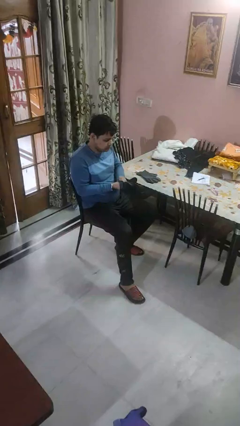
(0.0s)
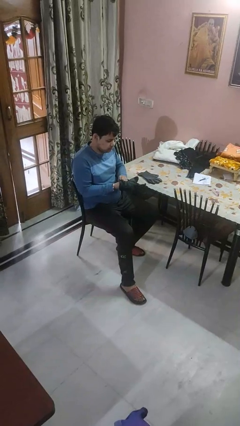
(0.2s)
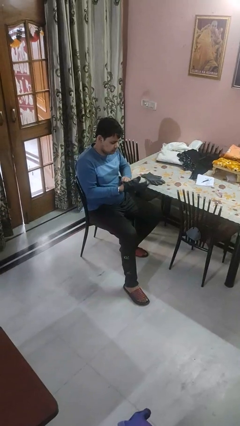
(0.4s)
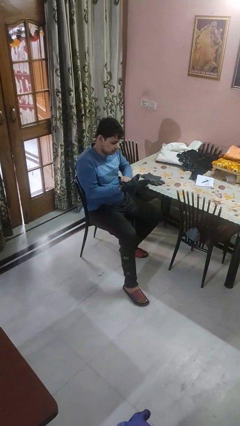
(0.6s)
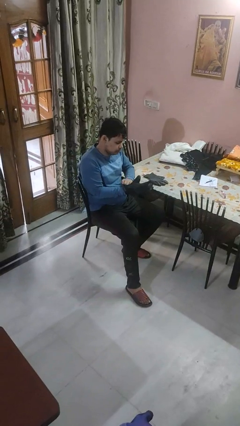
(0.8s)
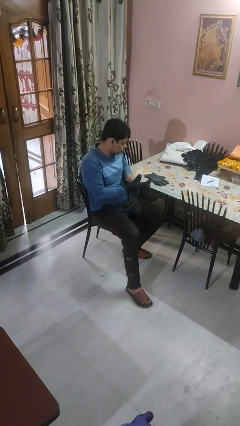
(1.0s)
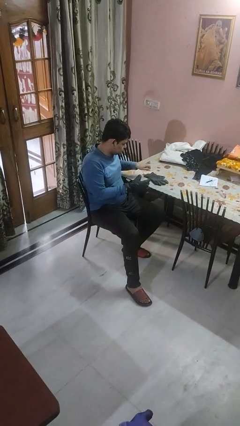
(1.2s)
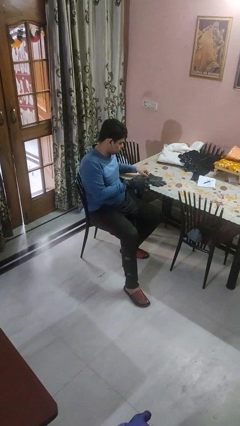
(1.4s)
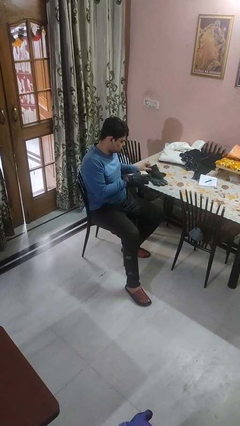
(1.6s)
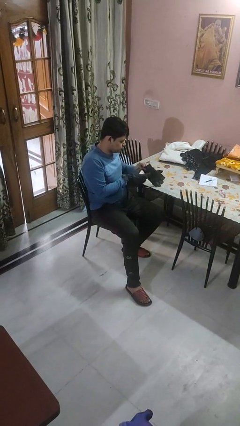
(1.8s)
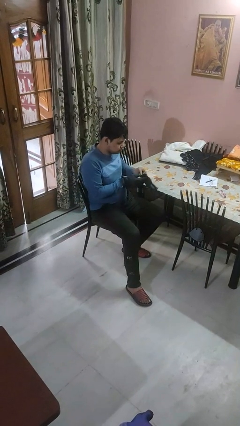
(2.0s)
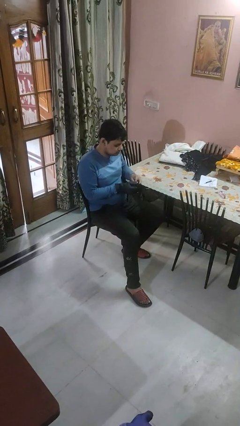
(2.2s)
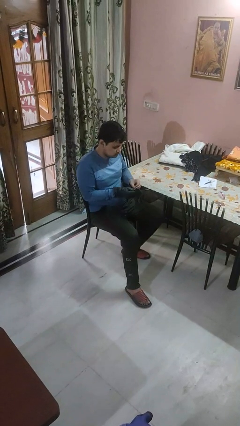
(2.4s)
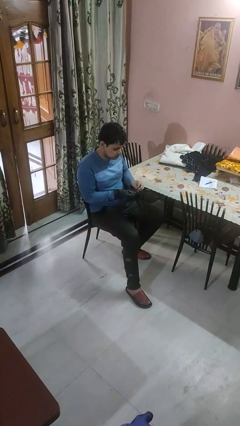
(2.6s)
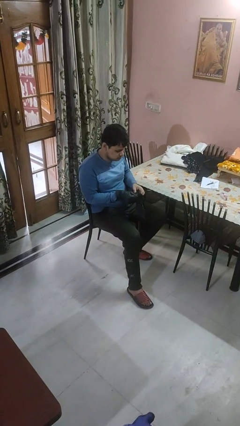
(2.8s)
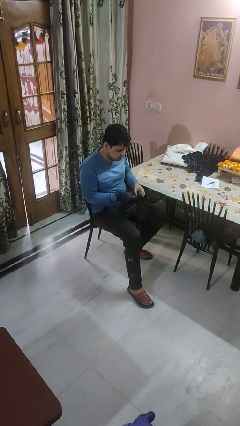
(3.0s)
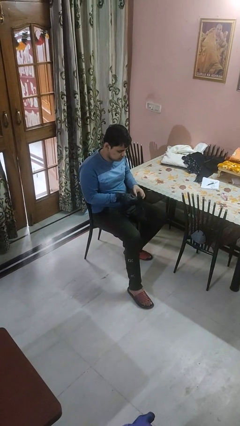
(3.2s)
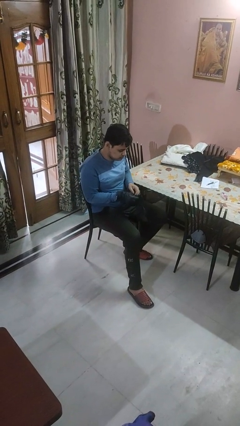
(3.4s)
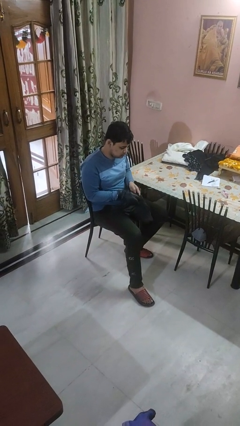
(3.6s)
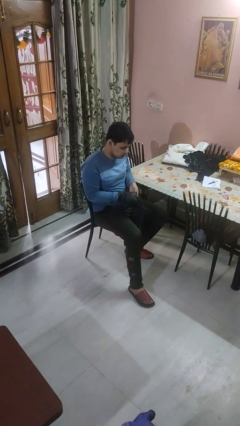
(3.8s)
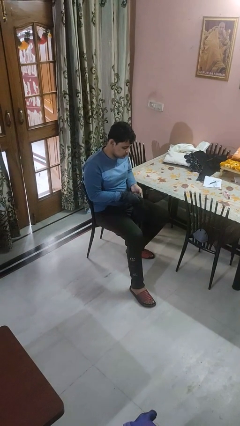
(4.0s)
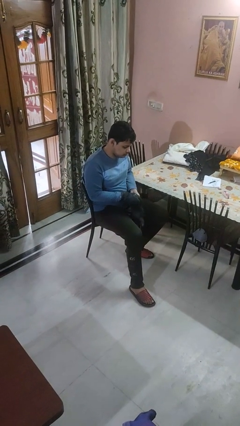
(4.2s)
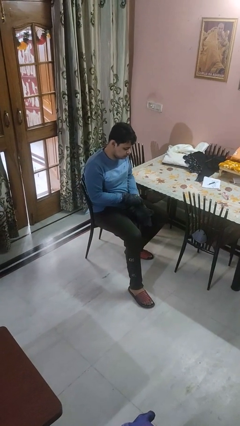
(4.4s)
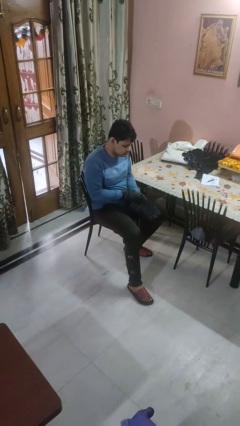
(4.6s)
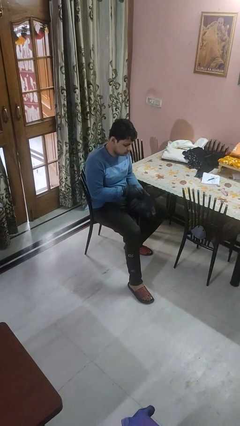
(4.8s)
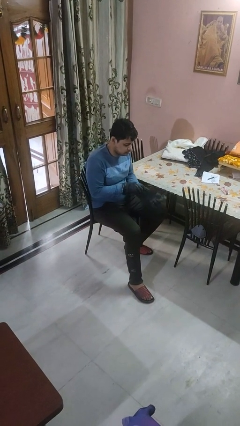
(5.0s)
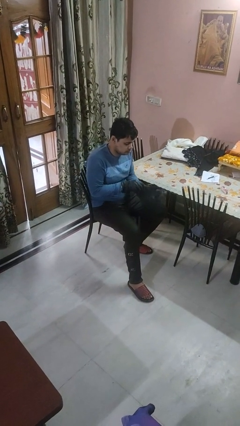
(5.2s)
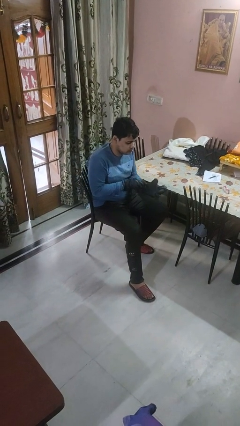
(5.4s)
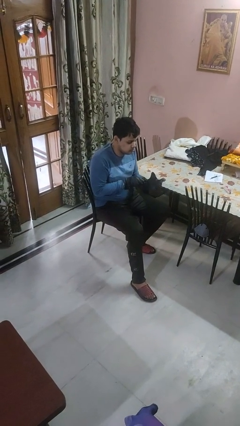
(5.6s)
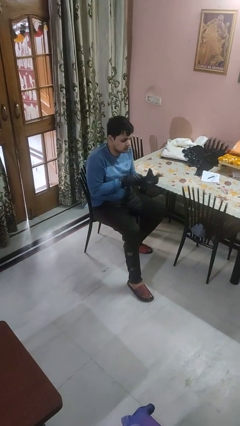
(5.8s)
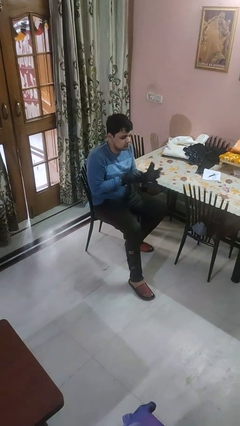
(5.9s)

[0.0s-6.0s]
person puts on gloves

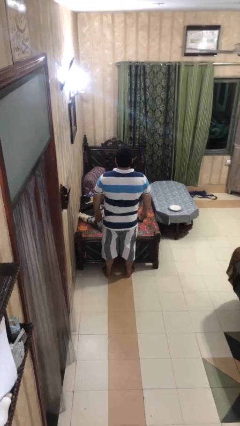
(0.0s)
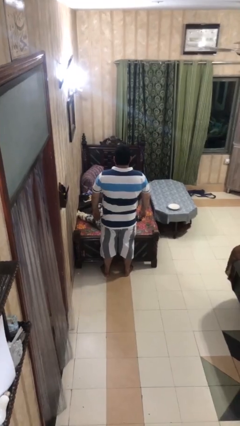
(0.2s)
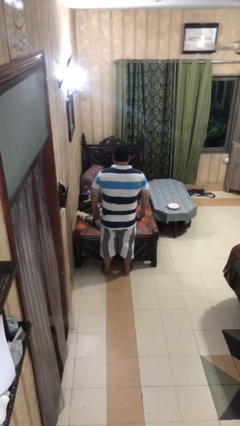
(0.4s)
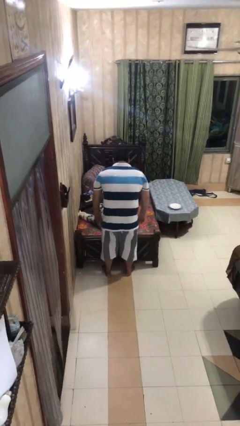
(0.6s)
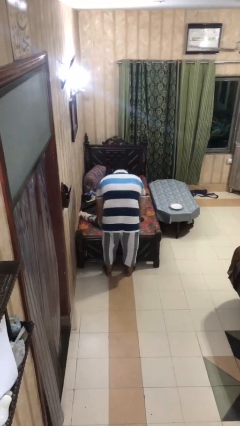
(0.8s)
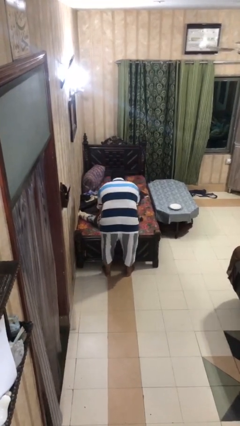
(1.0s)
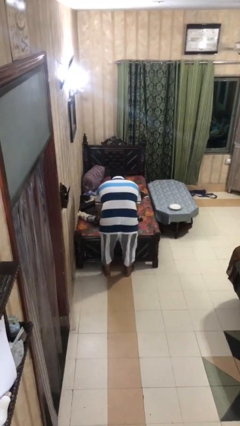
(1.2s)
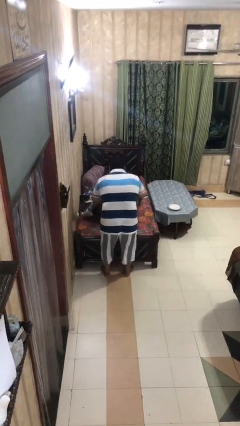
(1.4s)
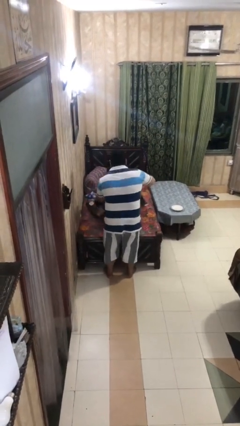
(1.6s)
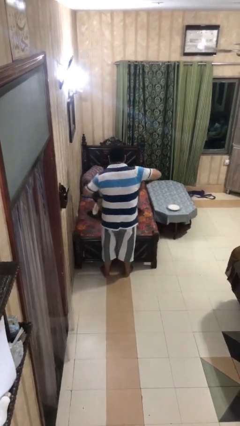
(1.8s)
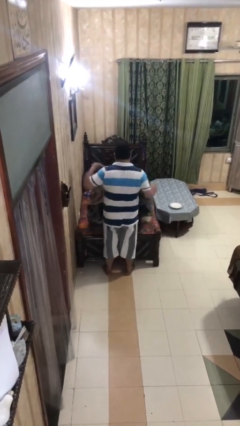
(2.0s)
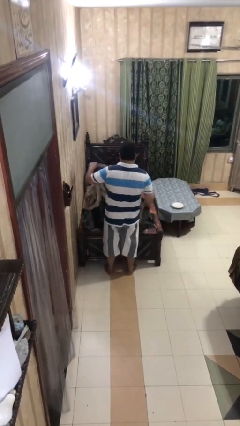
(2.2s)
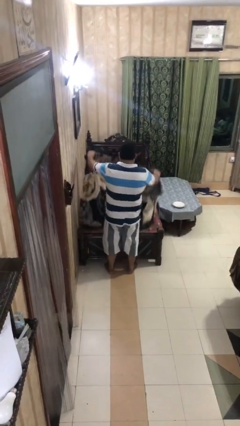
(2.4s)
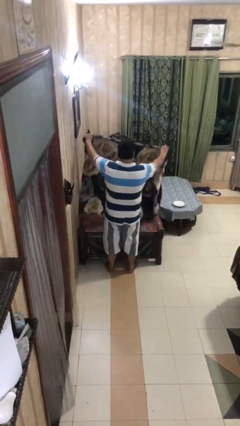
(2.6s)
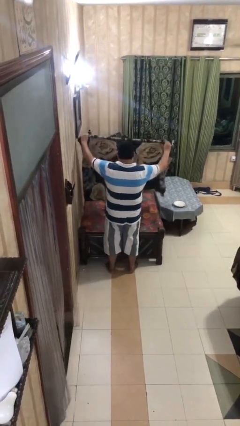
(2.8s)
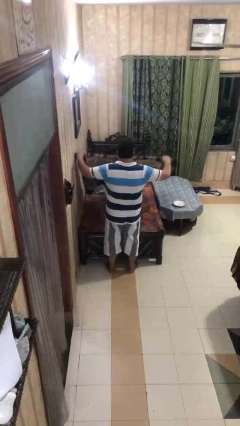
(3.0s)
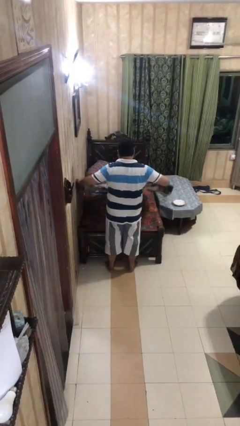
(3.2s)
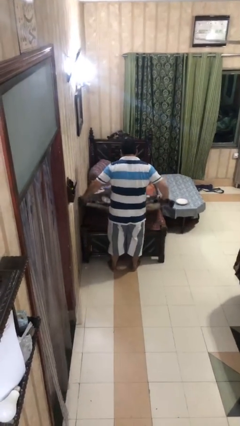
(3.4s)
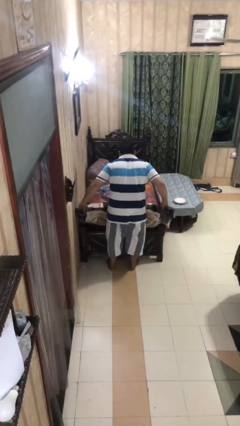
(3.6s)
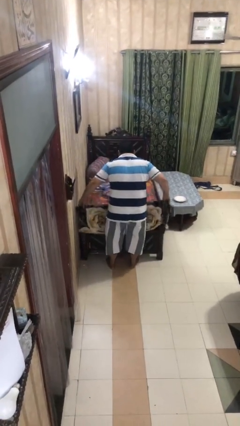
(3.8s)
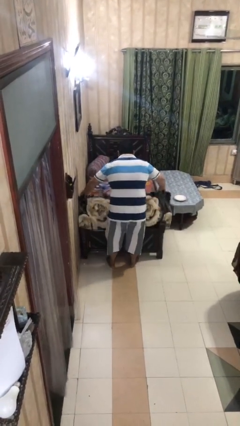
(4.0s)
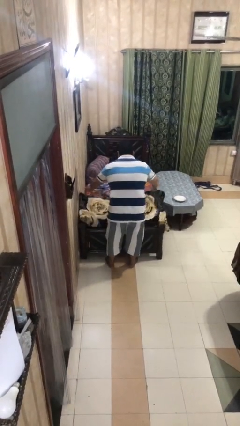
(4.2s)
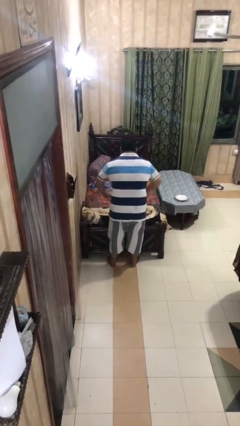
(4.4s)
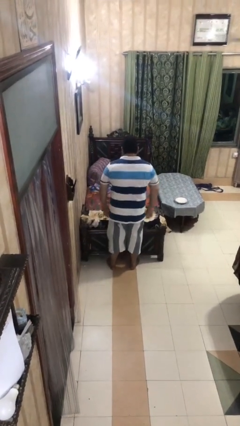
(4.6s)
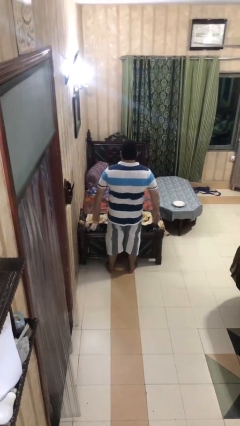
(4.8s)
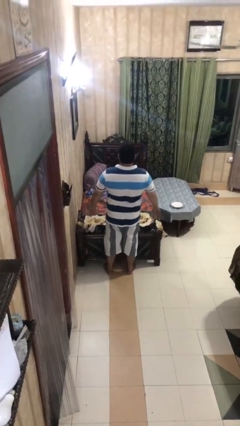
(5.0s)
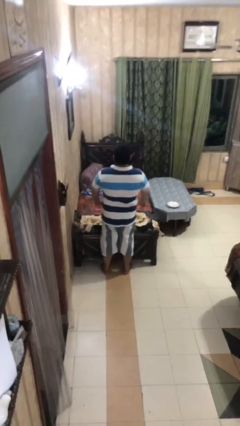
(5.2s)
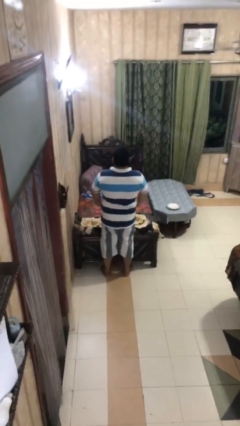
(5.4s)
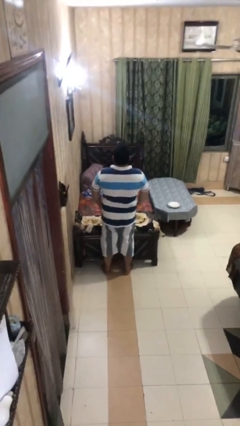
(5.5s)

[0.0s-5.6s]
person folds blanket

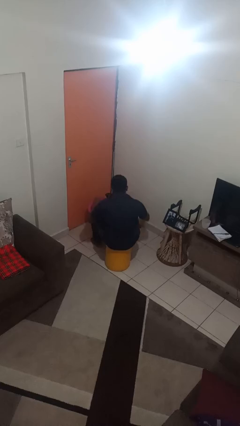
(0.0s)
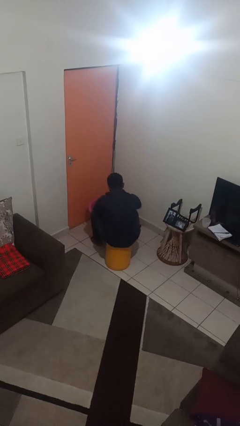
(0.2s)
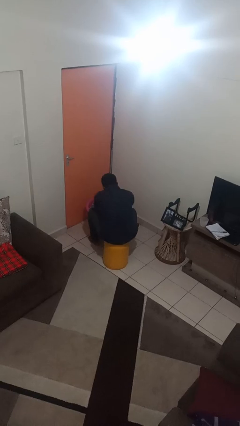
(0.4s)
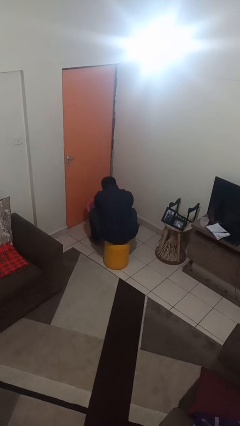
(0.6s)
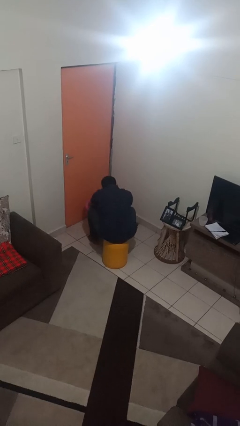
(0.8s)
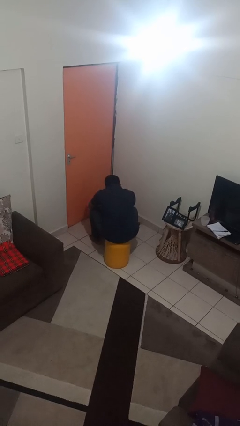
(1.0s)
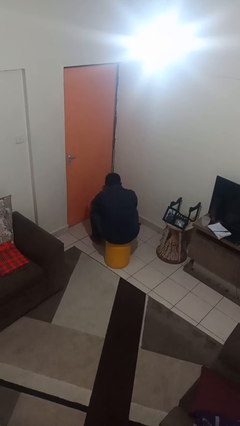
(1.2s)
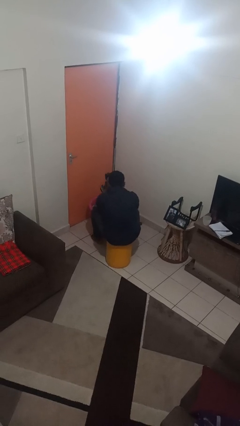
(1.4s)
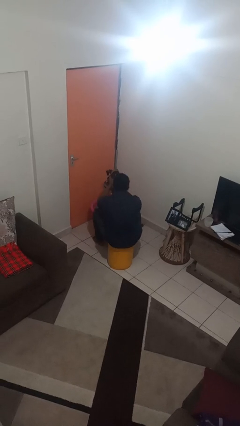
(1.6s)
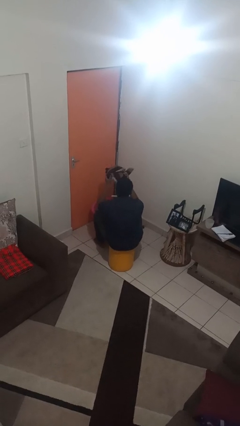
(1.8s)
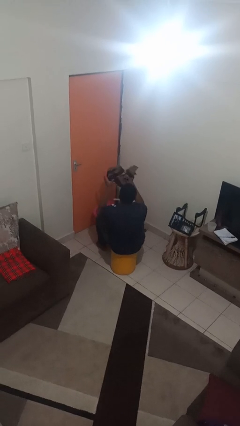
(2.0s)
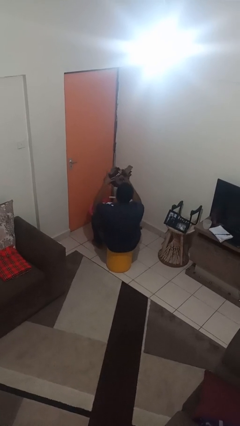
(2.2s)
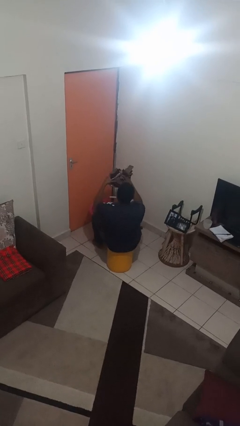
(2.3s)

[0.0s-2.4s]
person takes object from basket

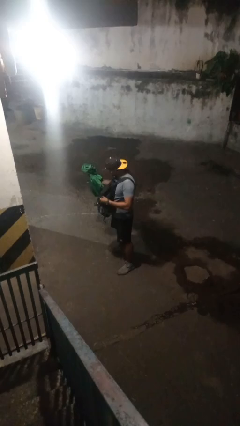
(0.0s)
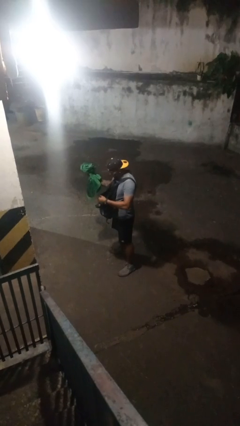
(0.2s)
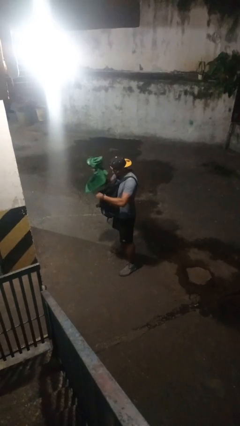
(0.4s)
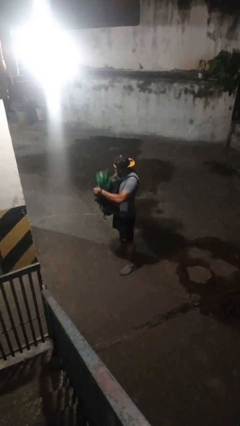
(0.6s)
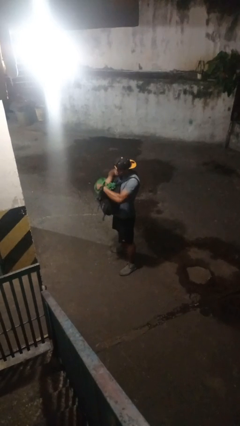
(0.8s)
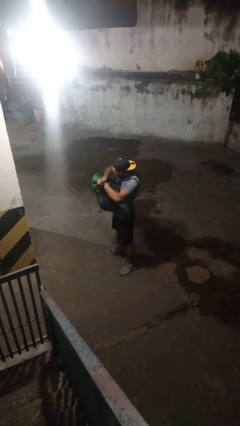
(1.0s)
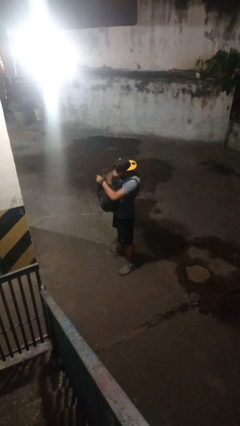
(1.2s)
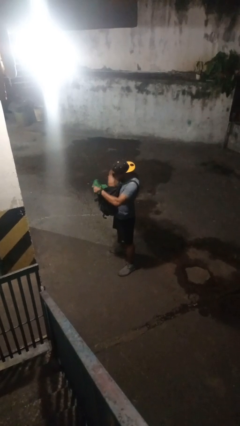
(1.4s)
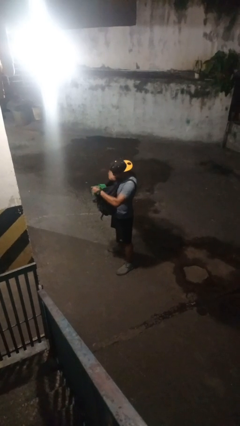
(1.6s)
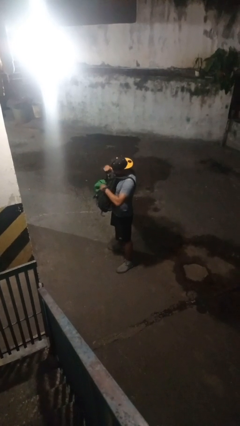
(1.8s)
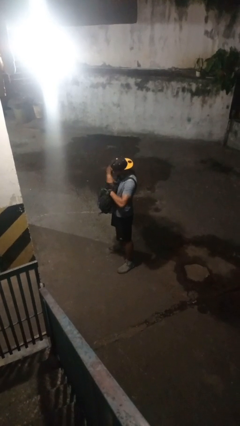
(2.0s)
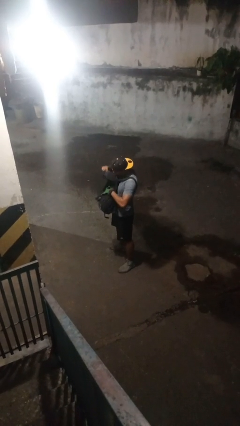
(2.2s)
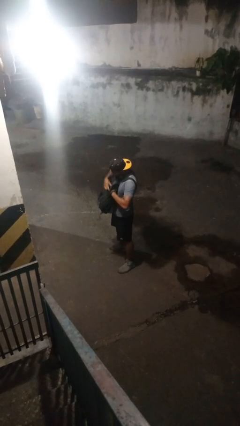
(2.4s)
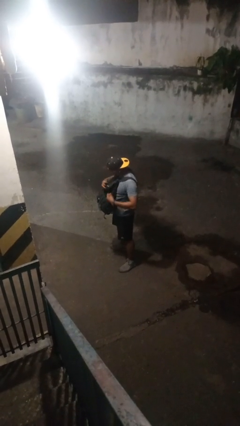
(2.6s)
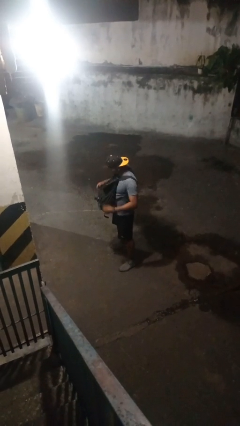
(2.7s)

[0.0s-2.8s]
person puts object into backpack

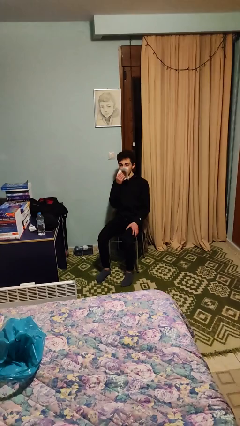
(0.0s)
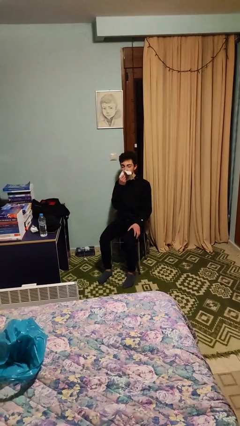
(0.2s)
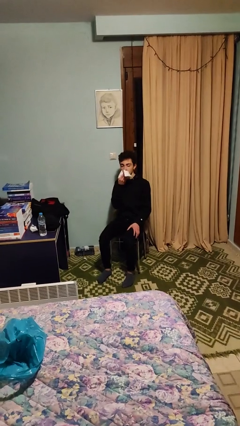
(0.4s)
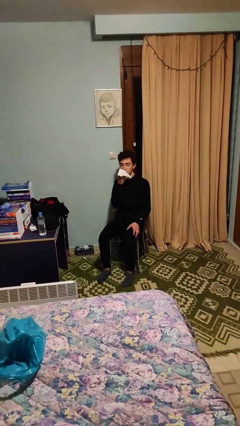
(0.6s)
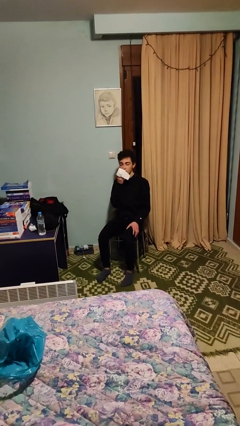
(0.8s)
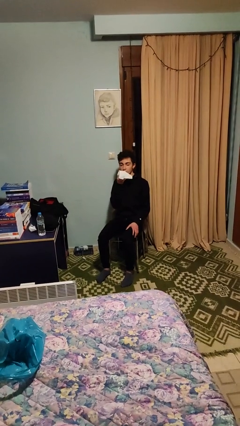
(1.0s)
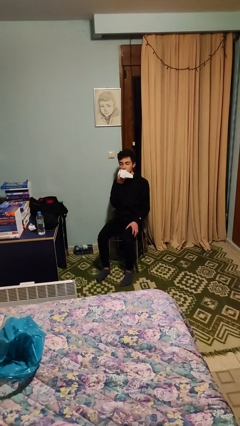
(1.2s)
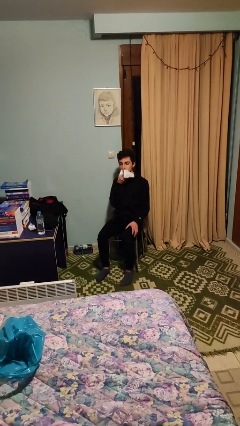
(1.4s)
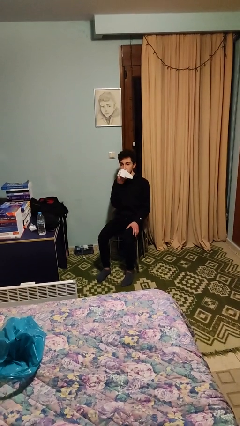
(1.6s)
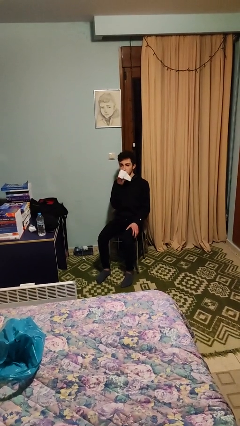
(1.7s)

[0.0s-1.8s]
person wipes mouth with napkin
